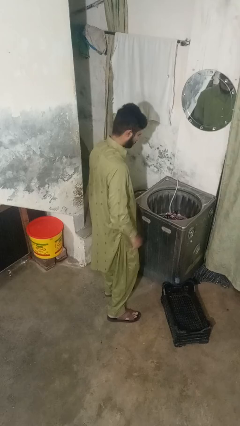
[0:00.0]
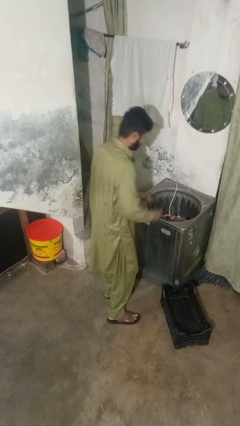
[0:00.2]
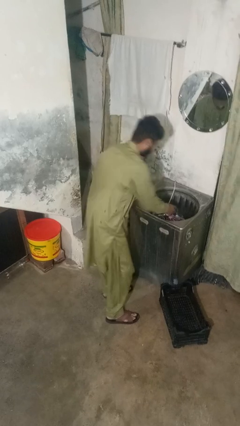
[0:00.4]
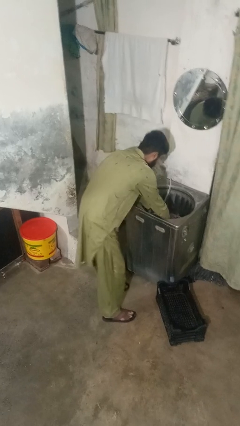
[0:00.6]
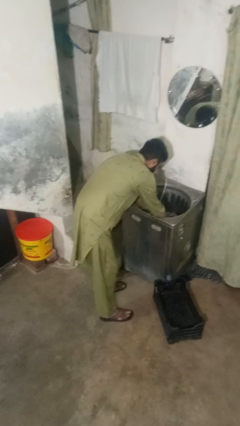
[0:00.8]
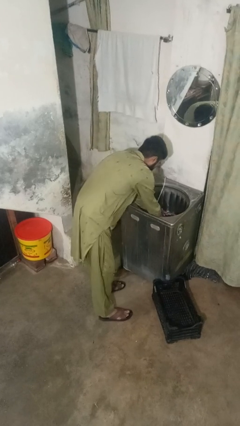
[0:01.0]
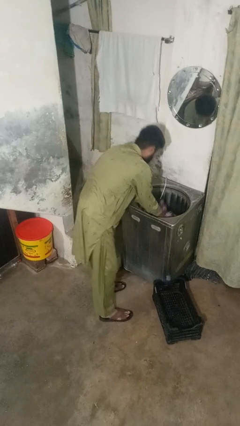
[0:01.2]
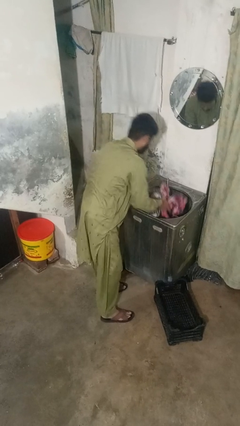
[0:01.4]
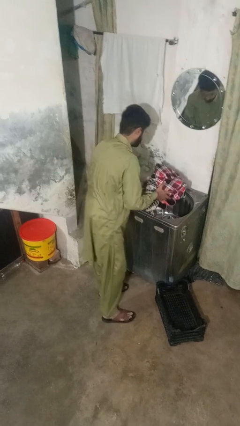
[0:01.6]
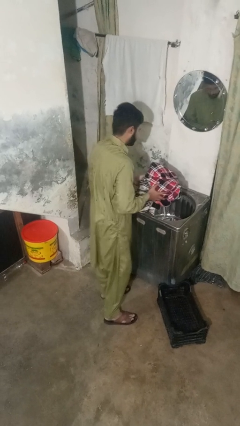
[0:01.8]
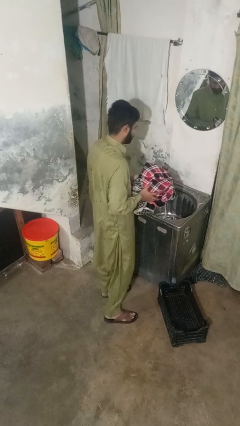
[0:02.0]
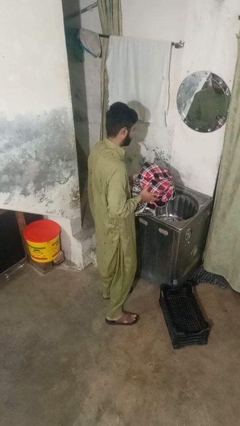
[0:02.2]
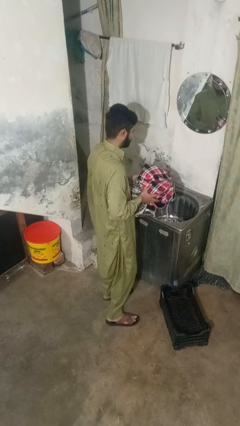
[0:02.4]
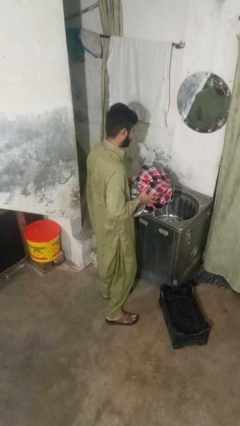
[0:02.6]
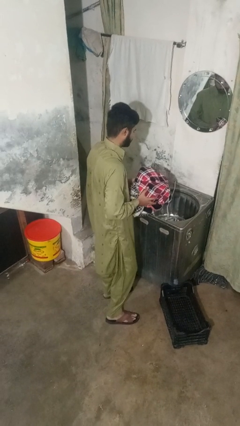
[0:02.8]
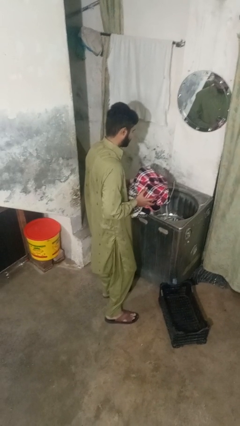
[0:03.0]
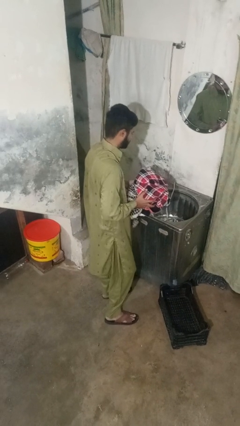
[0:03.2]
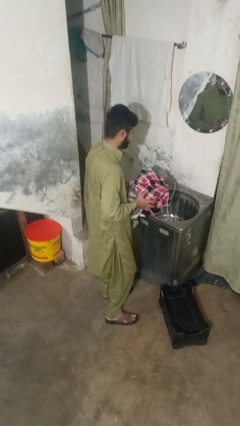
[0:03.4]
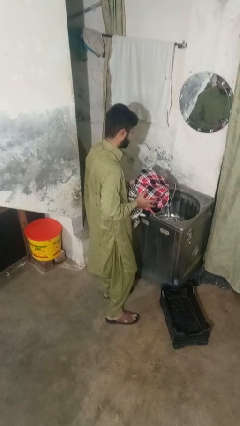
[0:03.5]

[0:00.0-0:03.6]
person unloads clotheswasher

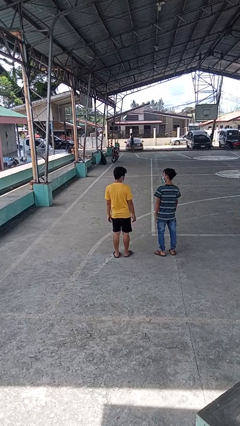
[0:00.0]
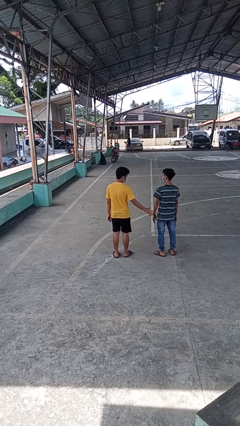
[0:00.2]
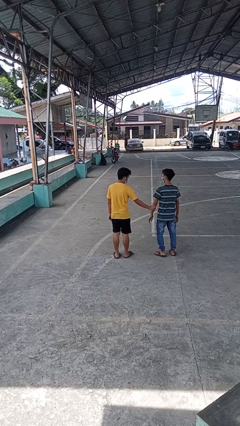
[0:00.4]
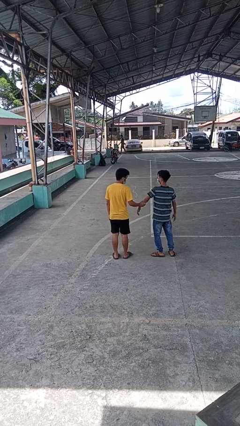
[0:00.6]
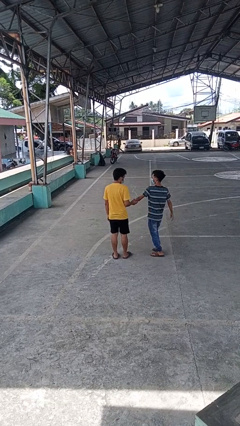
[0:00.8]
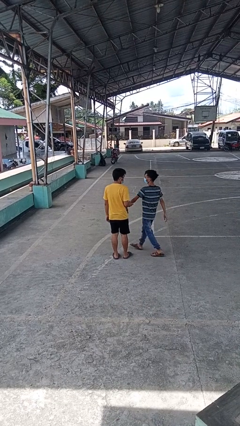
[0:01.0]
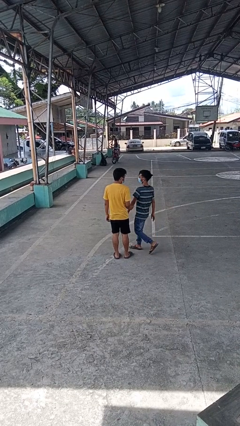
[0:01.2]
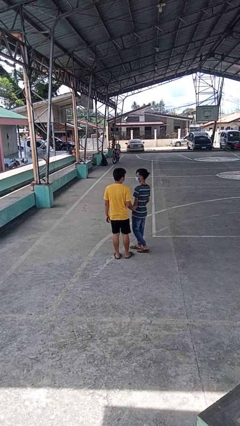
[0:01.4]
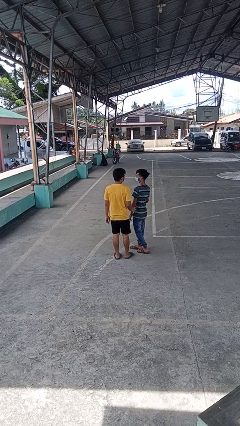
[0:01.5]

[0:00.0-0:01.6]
person grabs person by forearm

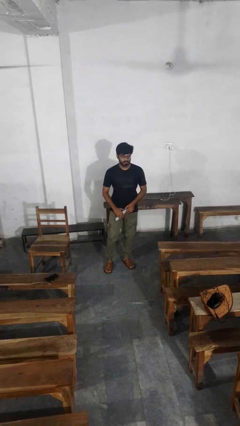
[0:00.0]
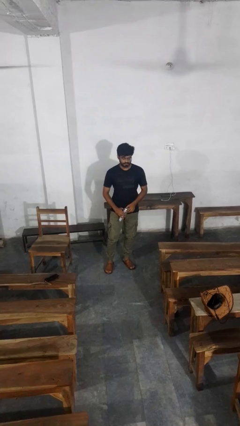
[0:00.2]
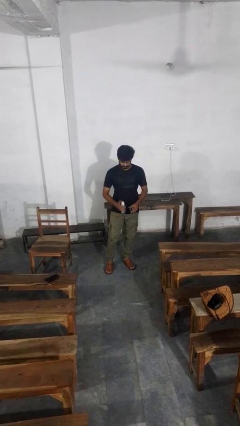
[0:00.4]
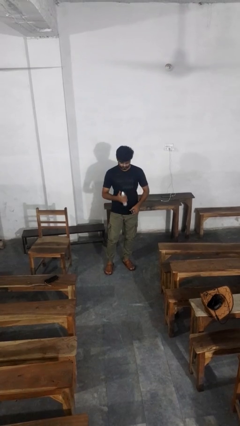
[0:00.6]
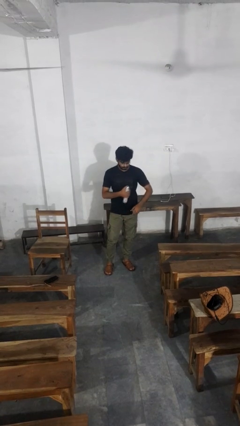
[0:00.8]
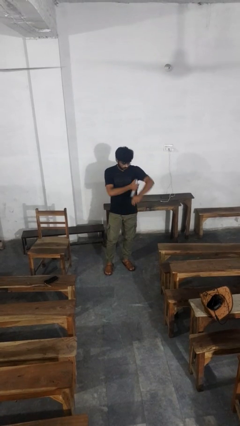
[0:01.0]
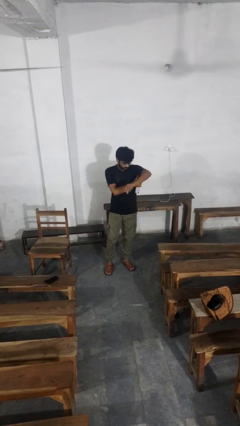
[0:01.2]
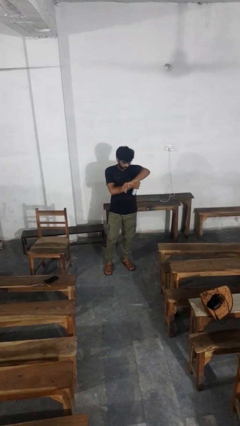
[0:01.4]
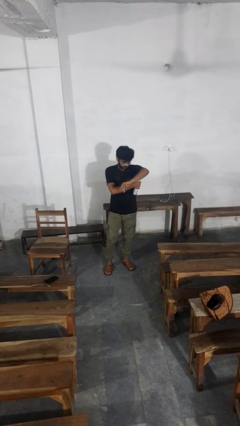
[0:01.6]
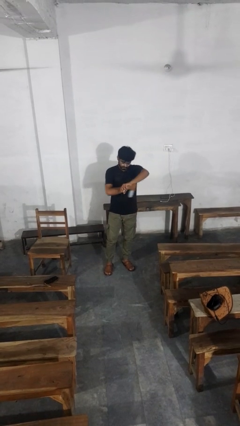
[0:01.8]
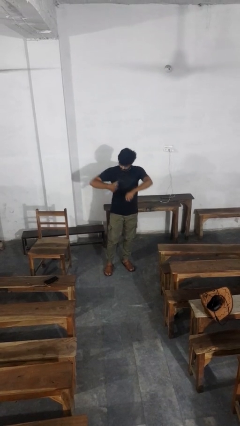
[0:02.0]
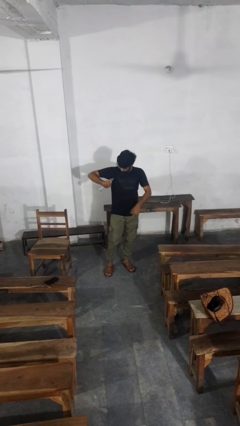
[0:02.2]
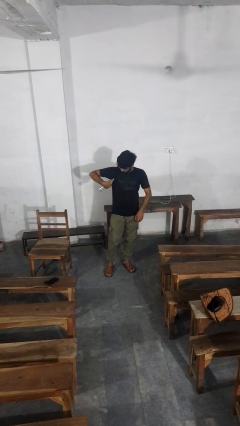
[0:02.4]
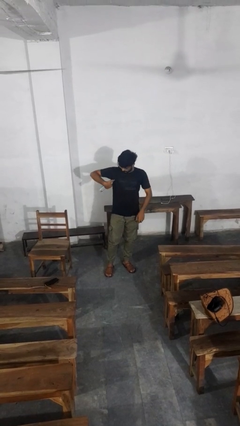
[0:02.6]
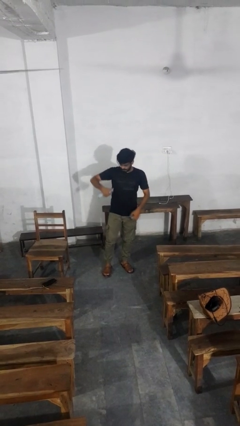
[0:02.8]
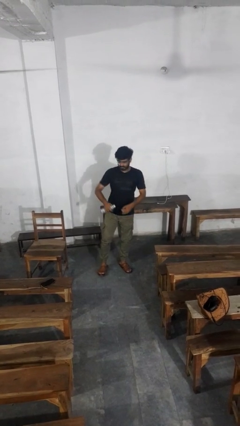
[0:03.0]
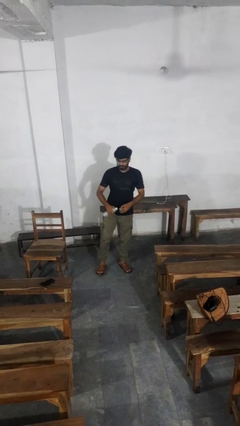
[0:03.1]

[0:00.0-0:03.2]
person applies deodorant

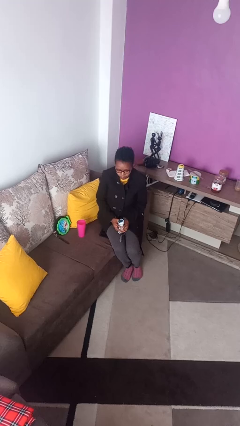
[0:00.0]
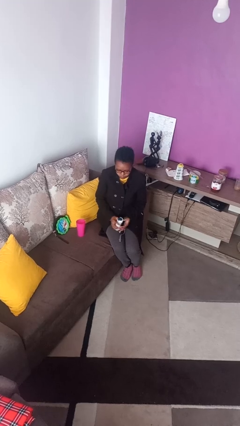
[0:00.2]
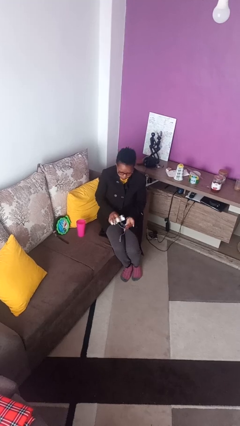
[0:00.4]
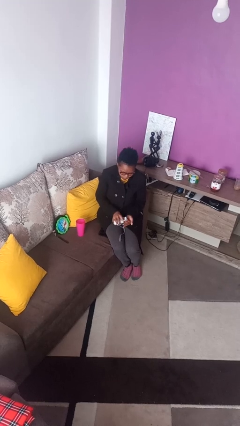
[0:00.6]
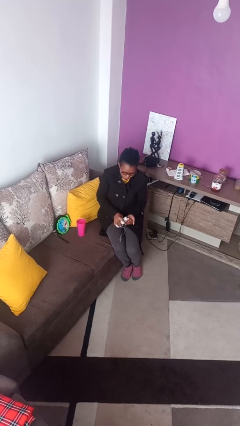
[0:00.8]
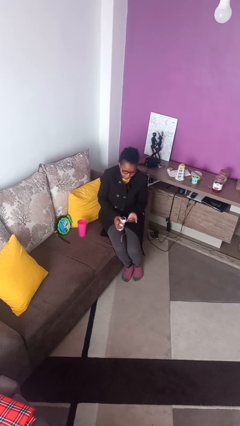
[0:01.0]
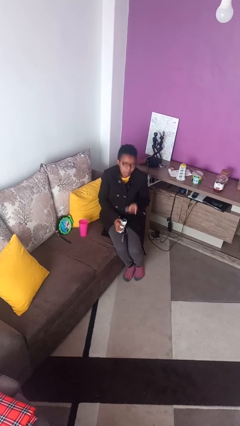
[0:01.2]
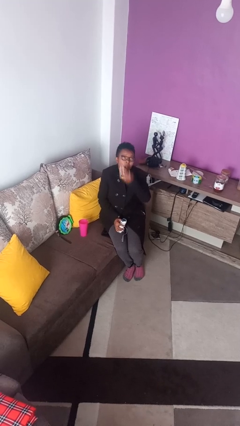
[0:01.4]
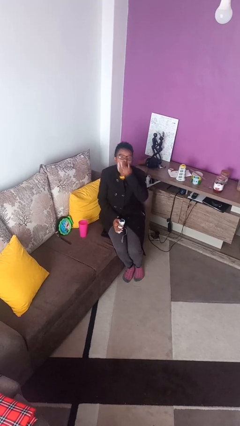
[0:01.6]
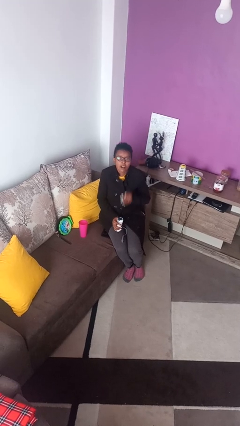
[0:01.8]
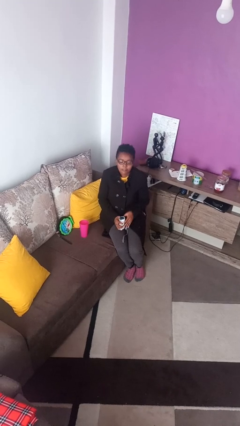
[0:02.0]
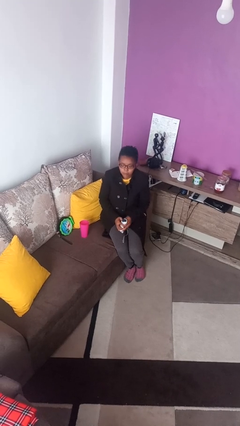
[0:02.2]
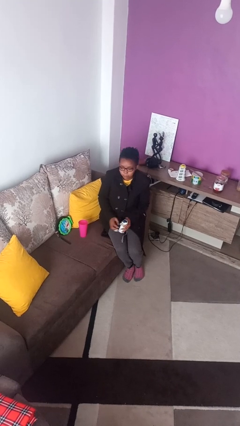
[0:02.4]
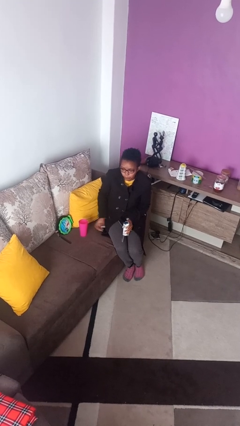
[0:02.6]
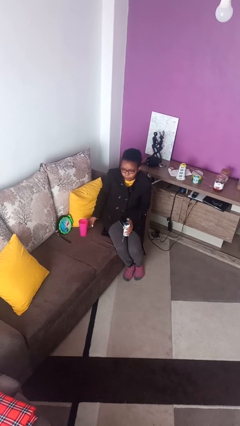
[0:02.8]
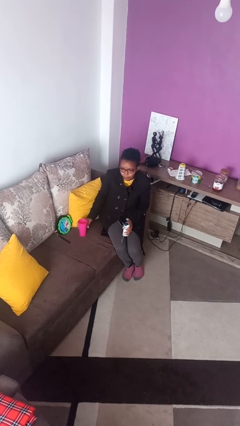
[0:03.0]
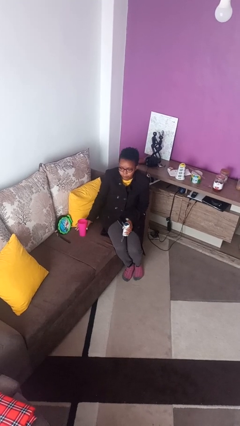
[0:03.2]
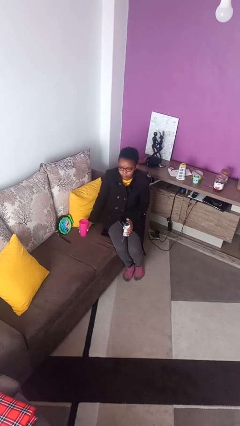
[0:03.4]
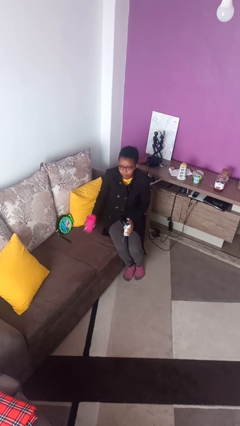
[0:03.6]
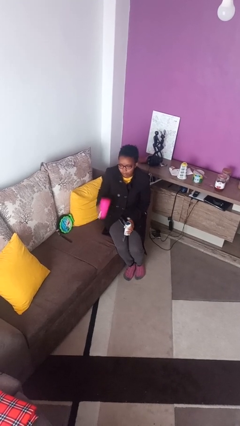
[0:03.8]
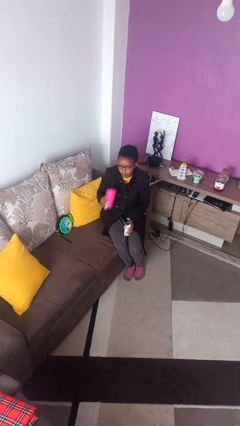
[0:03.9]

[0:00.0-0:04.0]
person takes medicine pills

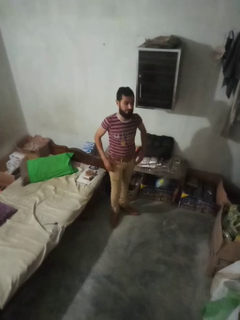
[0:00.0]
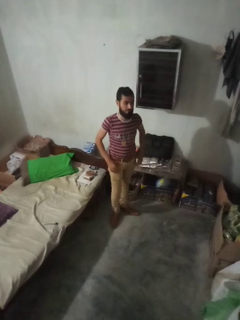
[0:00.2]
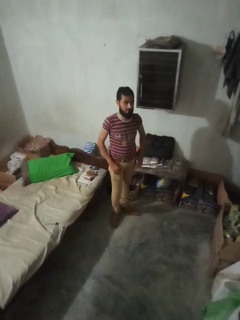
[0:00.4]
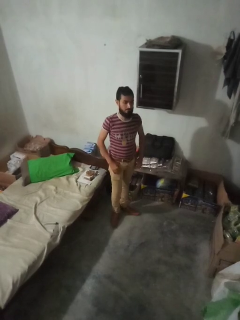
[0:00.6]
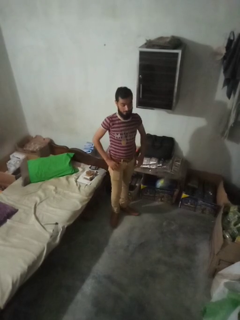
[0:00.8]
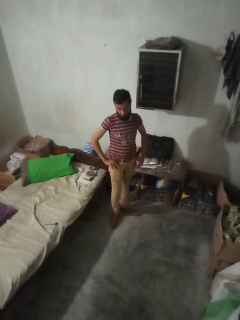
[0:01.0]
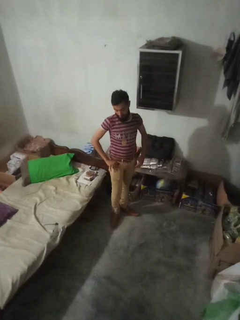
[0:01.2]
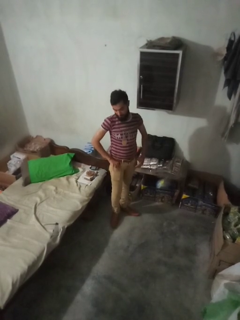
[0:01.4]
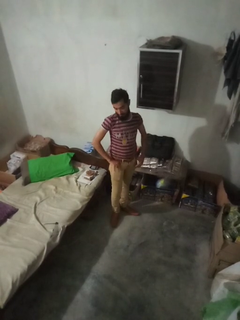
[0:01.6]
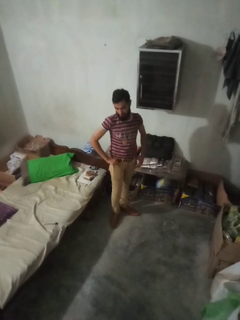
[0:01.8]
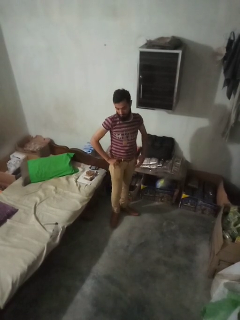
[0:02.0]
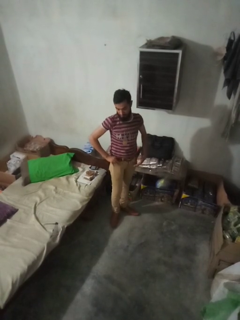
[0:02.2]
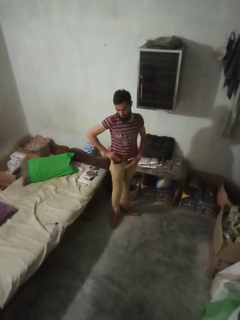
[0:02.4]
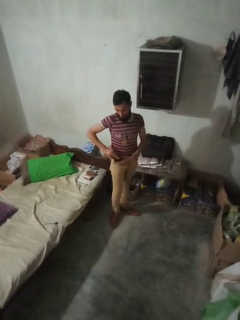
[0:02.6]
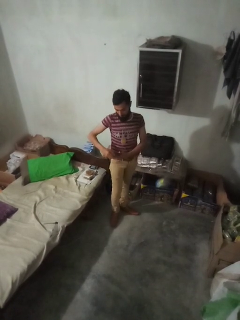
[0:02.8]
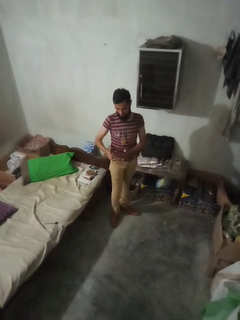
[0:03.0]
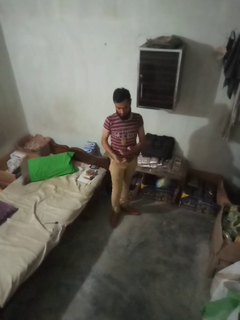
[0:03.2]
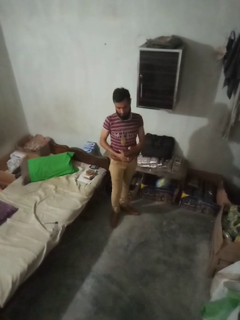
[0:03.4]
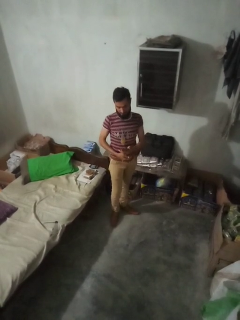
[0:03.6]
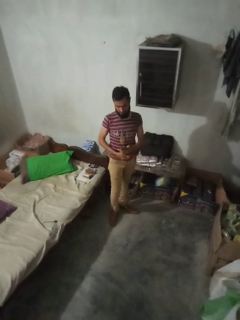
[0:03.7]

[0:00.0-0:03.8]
person takes phone from pocket

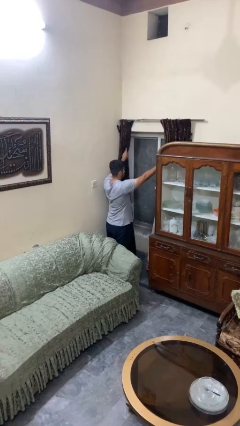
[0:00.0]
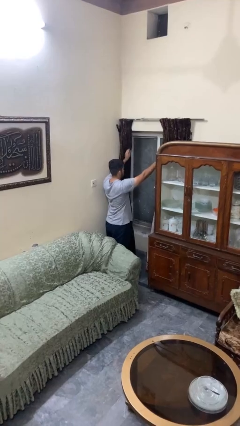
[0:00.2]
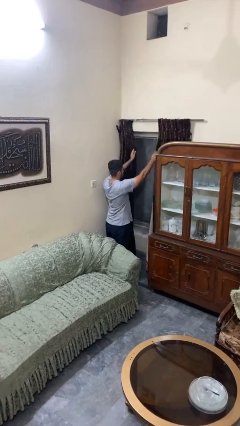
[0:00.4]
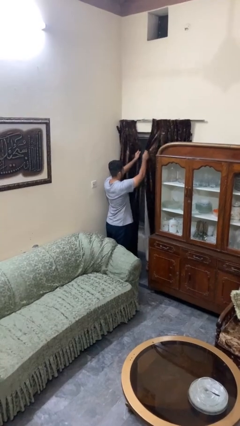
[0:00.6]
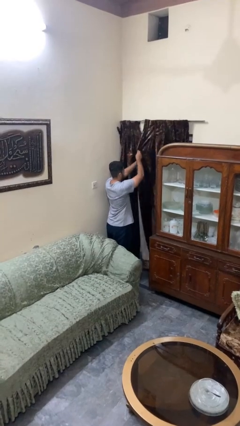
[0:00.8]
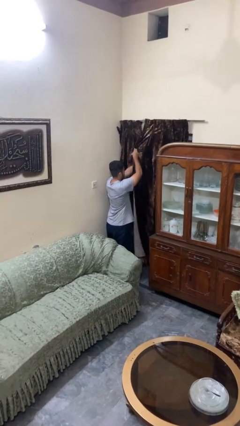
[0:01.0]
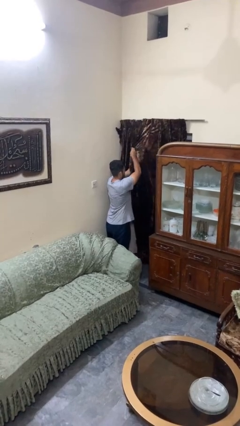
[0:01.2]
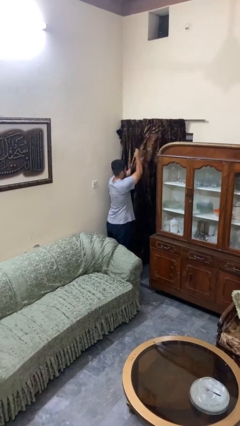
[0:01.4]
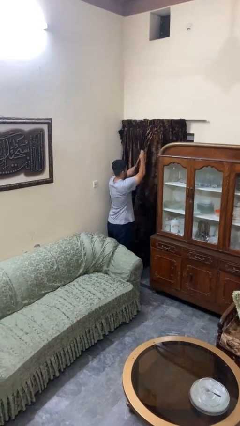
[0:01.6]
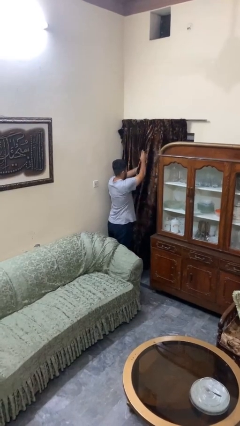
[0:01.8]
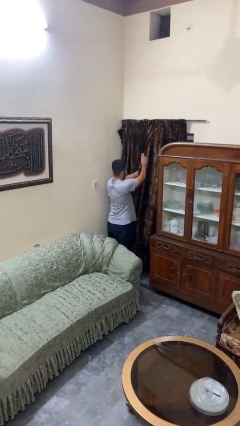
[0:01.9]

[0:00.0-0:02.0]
person closes curtains

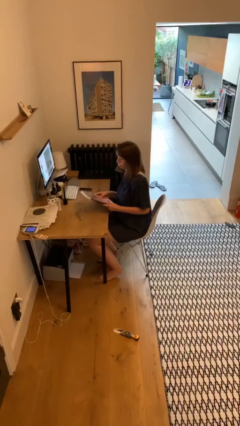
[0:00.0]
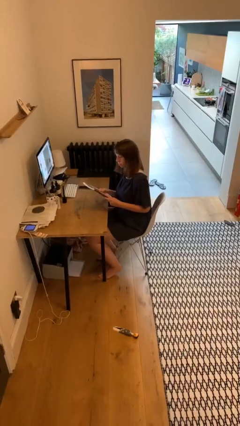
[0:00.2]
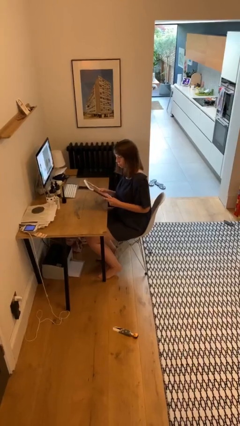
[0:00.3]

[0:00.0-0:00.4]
person picks up object from table
